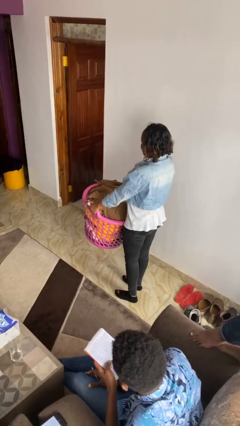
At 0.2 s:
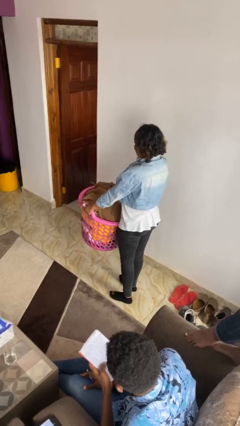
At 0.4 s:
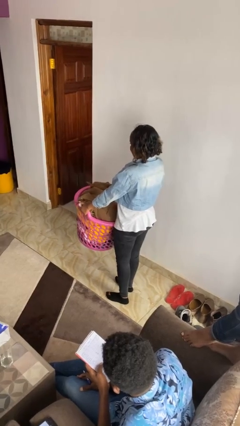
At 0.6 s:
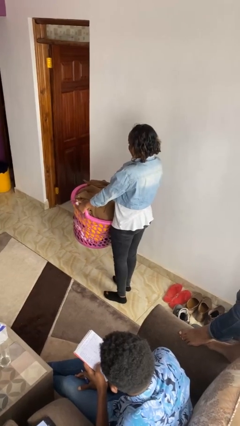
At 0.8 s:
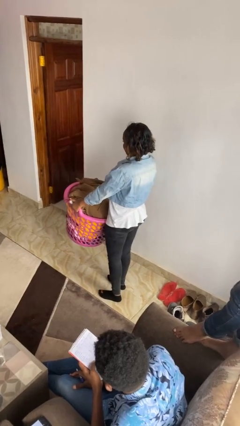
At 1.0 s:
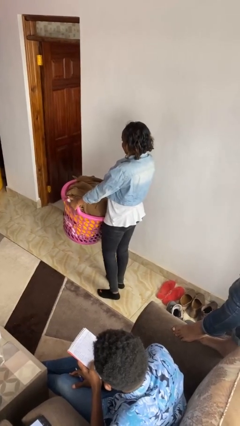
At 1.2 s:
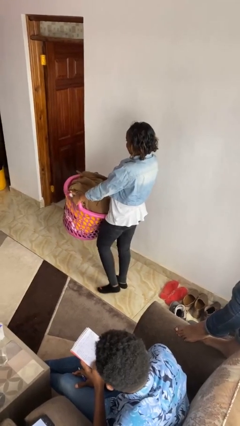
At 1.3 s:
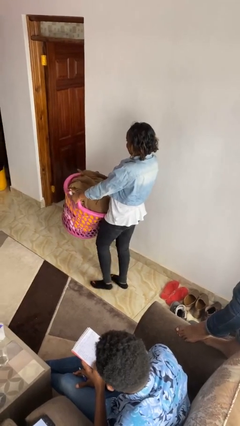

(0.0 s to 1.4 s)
person carries laundry basket

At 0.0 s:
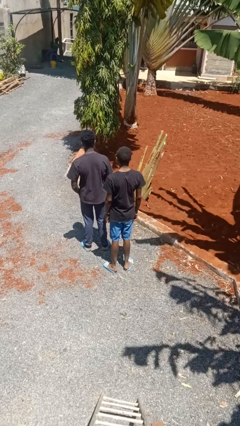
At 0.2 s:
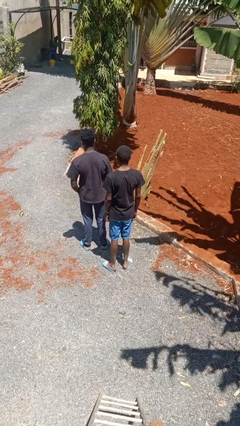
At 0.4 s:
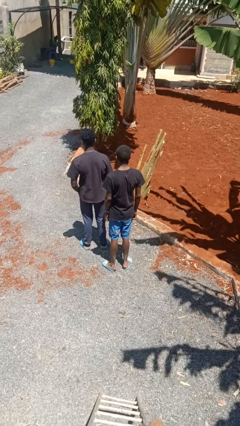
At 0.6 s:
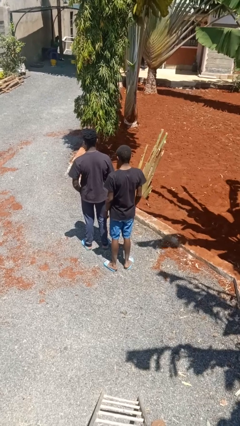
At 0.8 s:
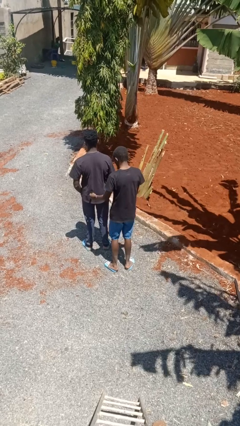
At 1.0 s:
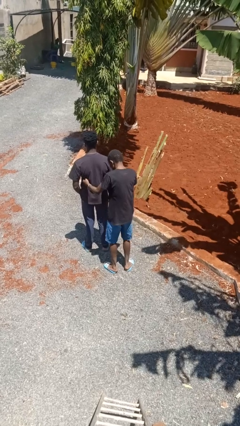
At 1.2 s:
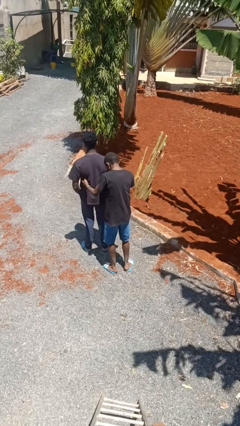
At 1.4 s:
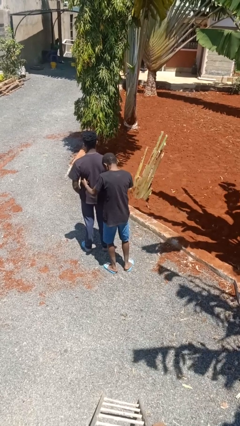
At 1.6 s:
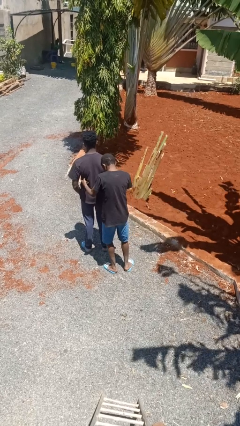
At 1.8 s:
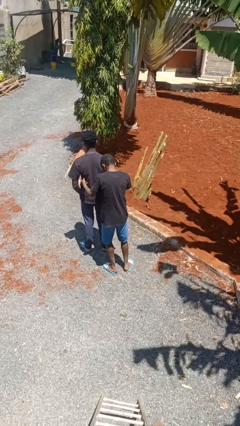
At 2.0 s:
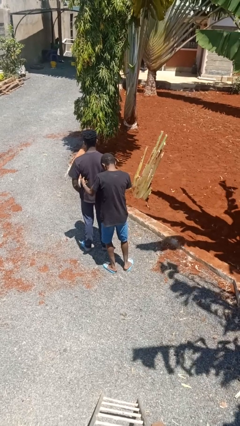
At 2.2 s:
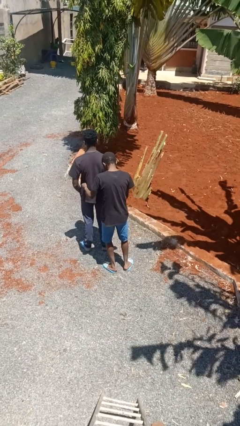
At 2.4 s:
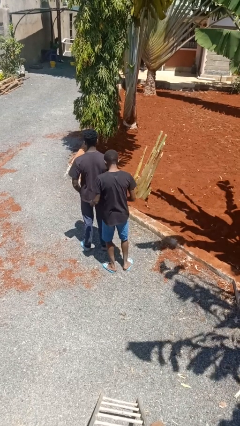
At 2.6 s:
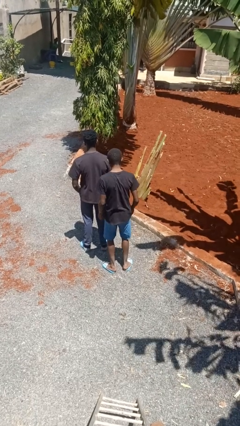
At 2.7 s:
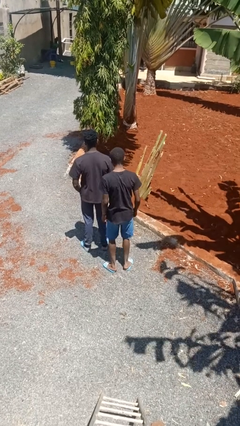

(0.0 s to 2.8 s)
person tickles person

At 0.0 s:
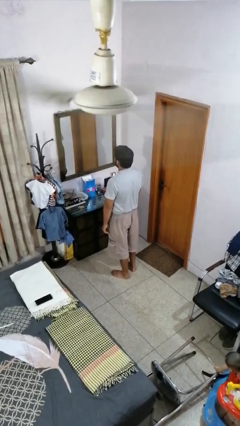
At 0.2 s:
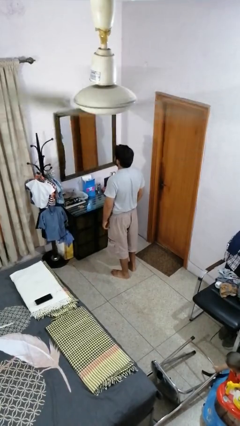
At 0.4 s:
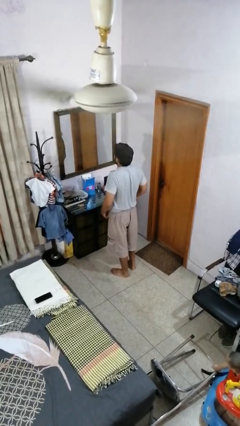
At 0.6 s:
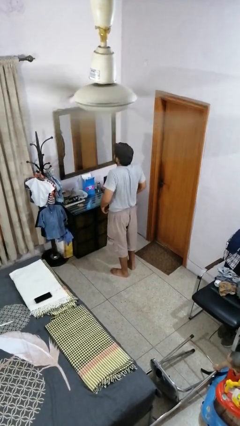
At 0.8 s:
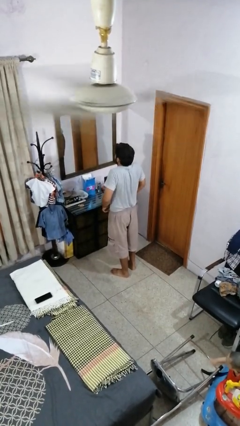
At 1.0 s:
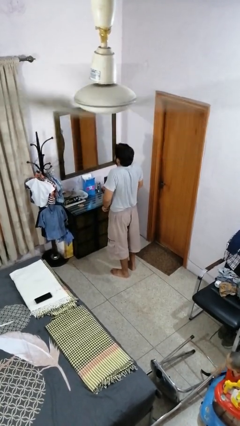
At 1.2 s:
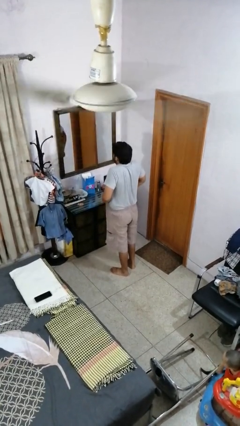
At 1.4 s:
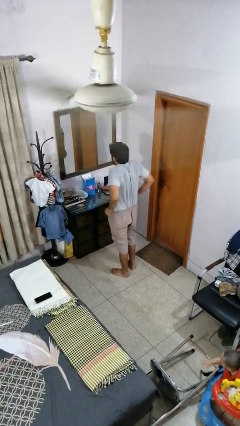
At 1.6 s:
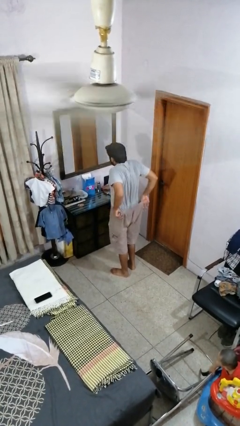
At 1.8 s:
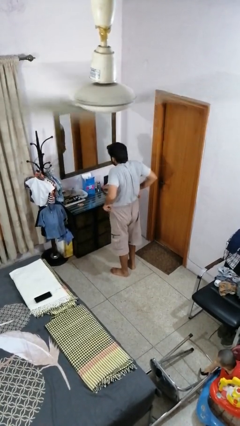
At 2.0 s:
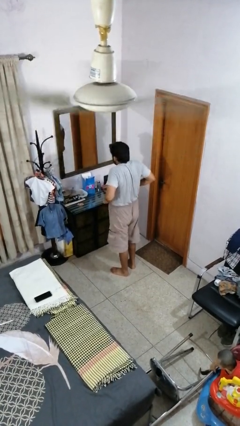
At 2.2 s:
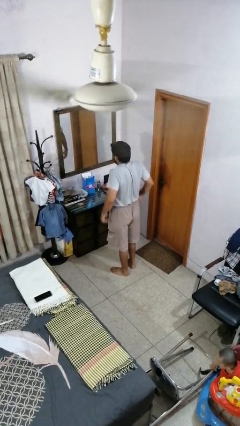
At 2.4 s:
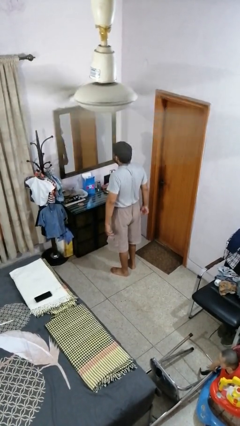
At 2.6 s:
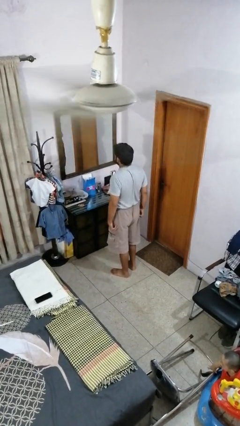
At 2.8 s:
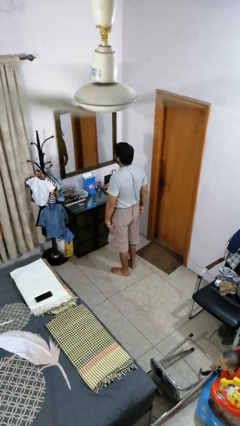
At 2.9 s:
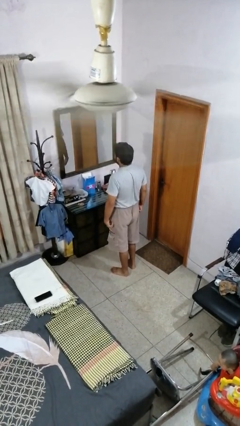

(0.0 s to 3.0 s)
person hikes up pants

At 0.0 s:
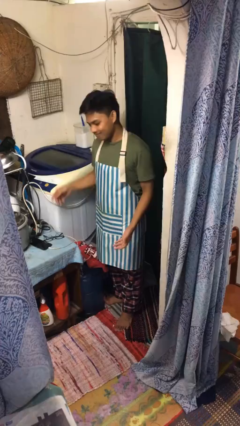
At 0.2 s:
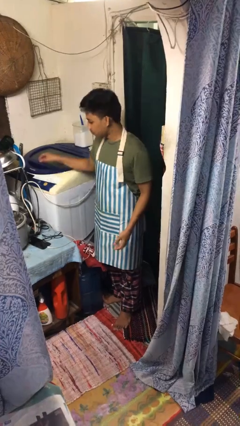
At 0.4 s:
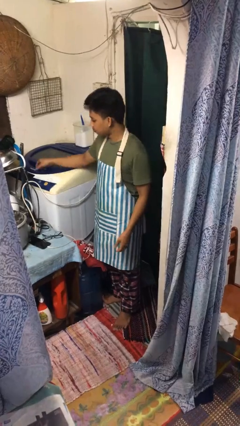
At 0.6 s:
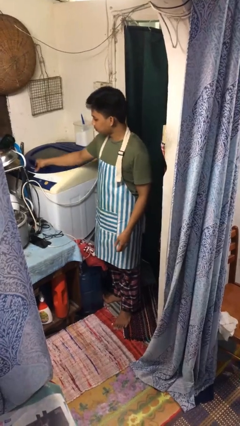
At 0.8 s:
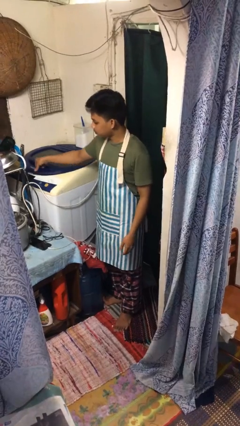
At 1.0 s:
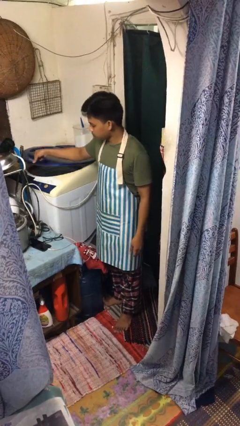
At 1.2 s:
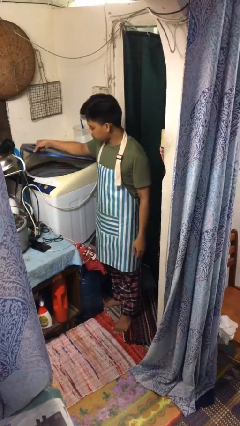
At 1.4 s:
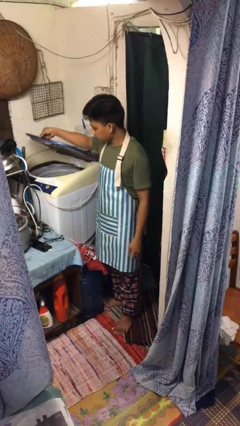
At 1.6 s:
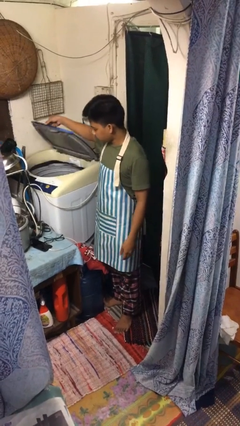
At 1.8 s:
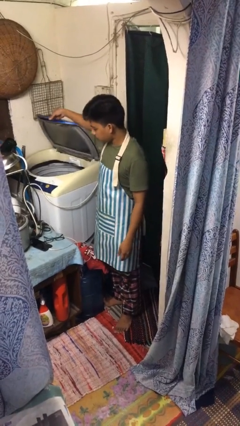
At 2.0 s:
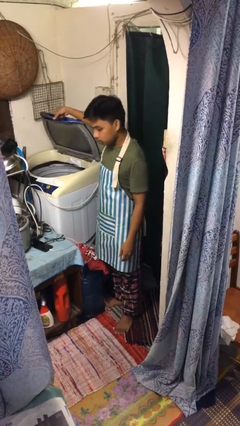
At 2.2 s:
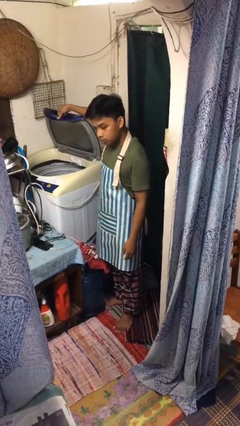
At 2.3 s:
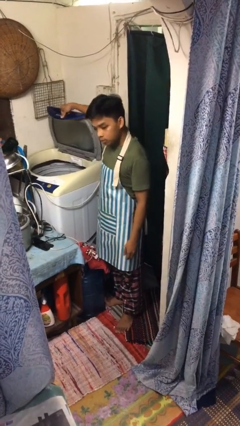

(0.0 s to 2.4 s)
person opens clothes washer

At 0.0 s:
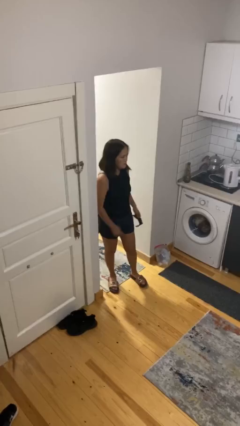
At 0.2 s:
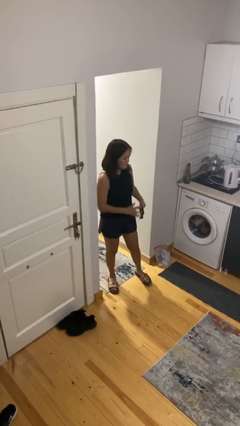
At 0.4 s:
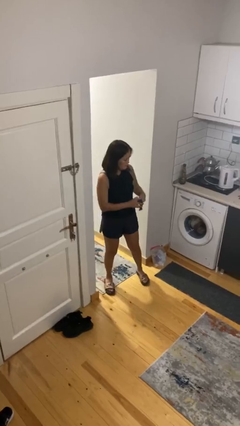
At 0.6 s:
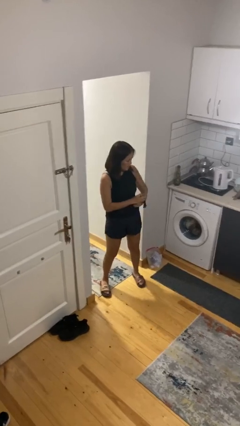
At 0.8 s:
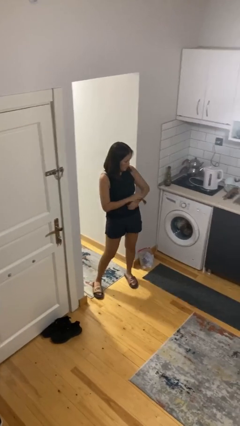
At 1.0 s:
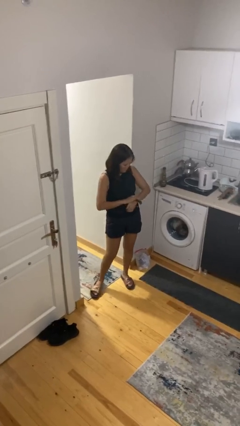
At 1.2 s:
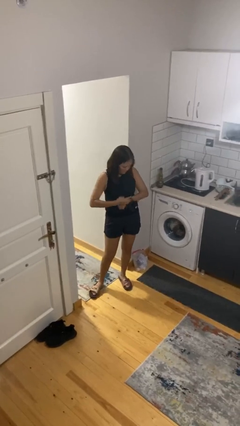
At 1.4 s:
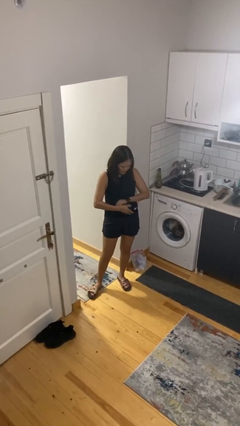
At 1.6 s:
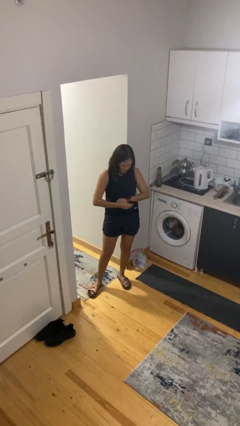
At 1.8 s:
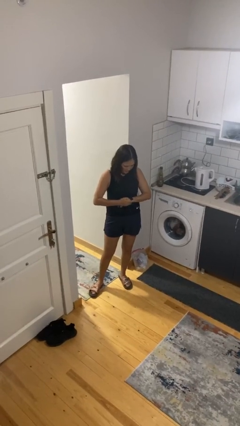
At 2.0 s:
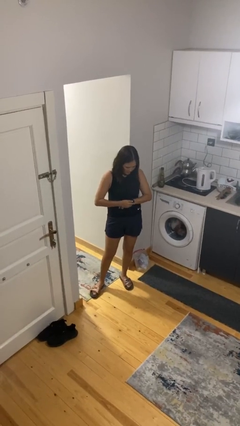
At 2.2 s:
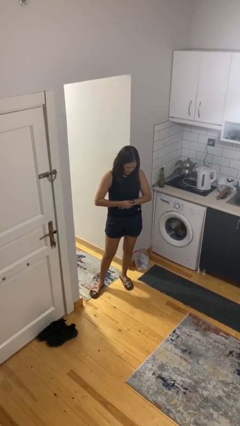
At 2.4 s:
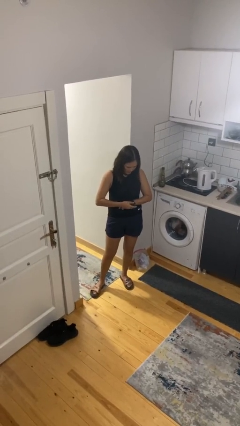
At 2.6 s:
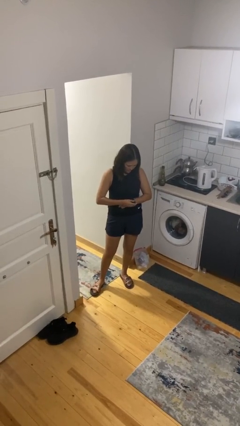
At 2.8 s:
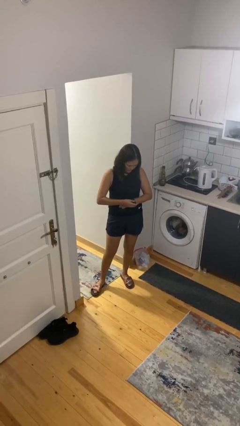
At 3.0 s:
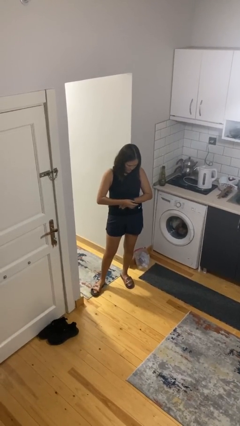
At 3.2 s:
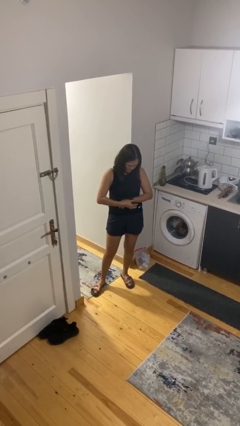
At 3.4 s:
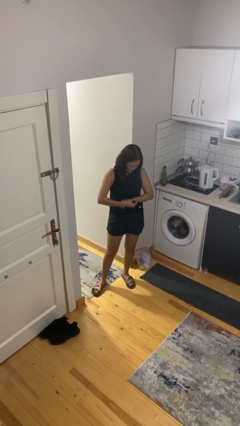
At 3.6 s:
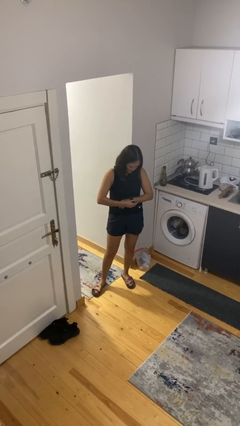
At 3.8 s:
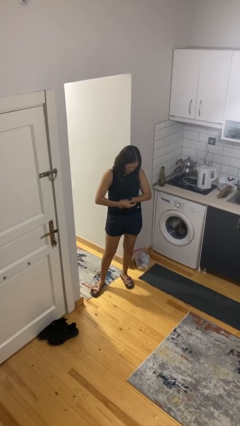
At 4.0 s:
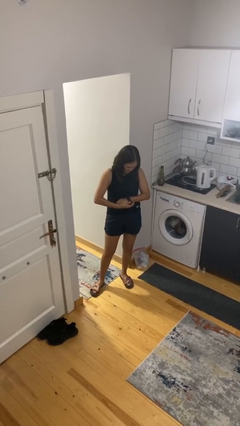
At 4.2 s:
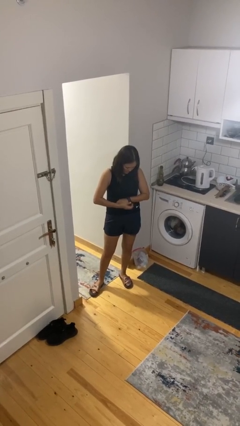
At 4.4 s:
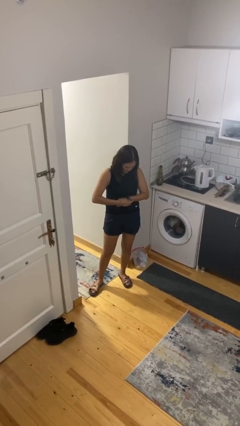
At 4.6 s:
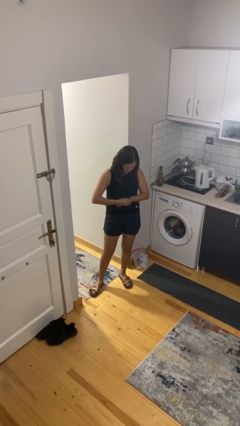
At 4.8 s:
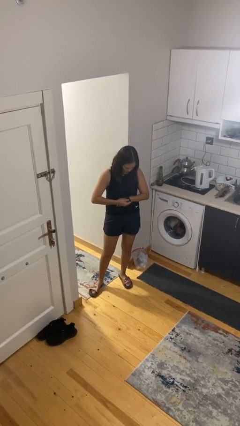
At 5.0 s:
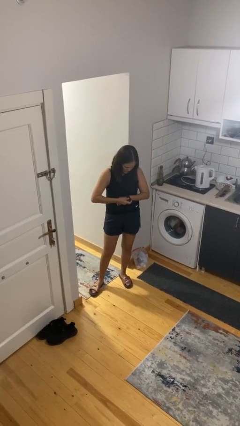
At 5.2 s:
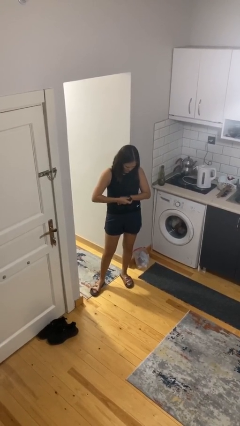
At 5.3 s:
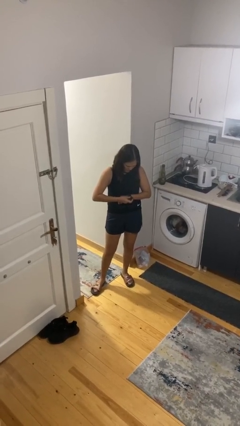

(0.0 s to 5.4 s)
person puts on wristwatch

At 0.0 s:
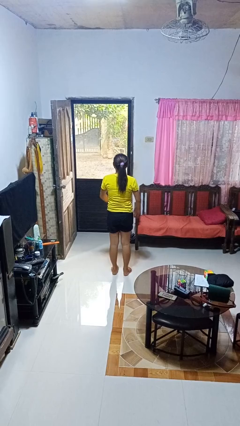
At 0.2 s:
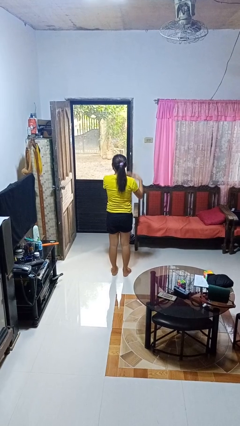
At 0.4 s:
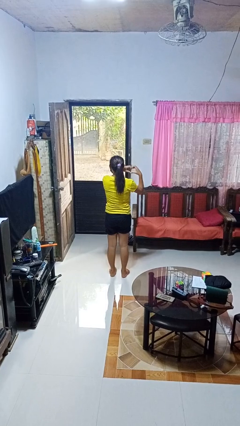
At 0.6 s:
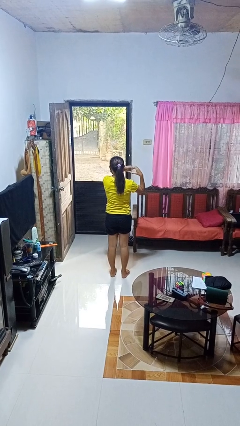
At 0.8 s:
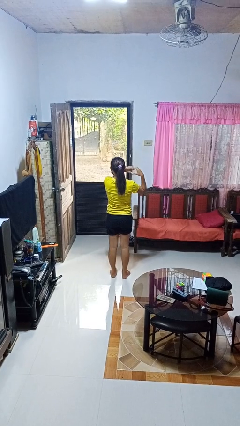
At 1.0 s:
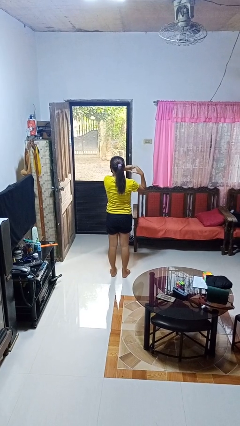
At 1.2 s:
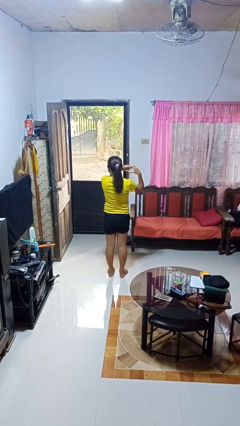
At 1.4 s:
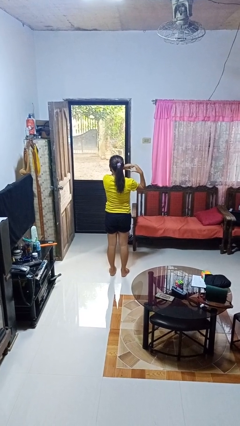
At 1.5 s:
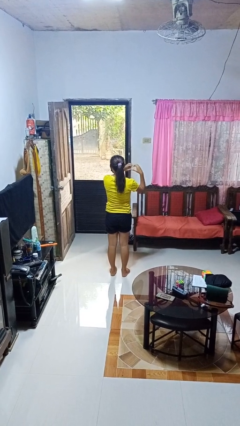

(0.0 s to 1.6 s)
person gestures heart

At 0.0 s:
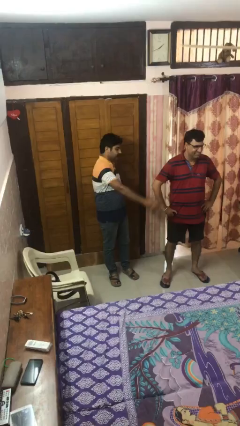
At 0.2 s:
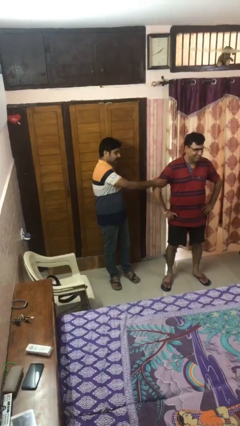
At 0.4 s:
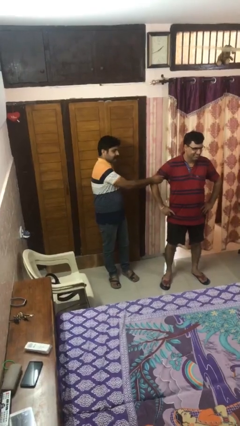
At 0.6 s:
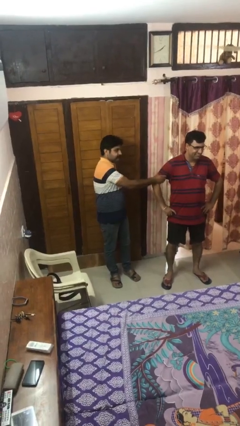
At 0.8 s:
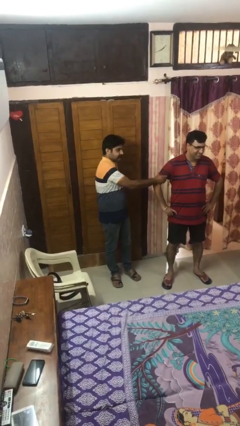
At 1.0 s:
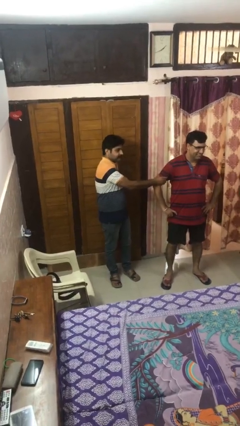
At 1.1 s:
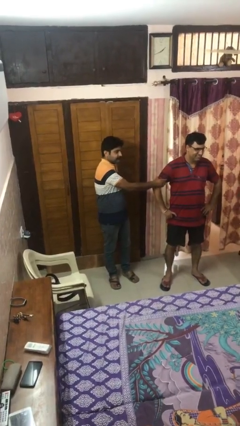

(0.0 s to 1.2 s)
person grabs person by bicep
